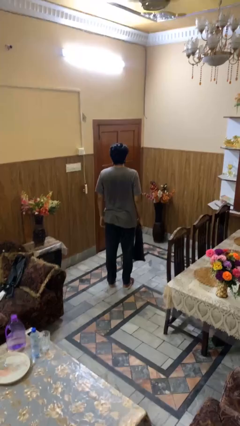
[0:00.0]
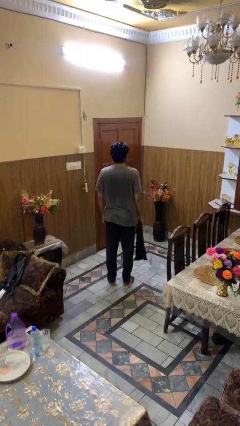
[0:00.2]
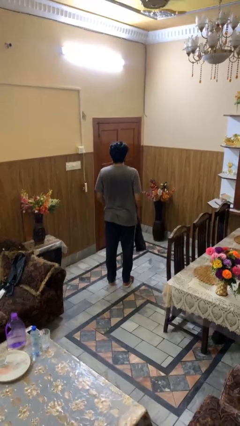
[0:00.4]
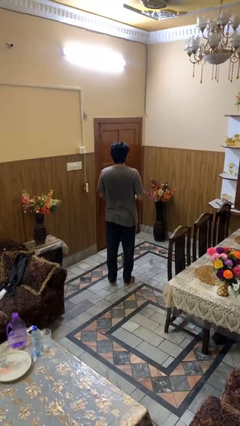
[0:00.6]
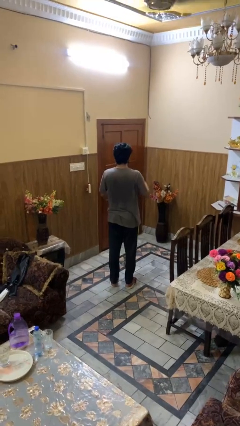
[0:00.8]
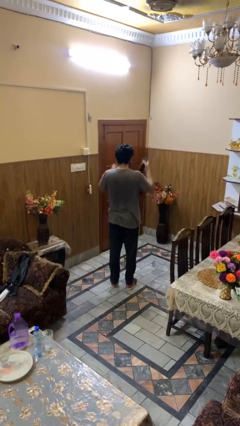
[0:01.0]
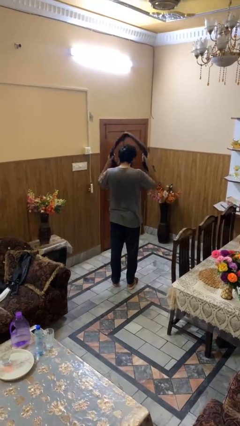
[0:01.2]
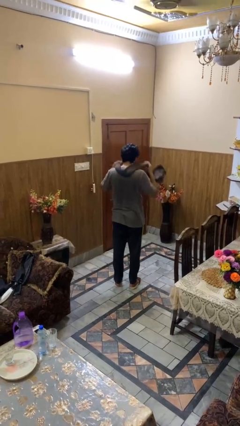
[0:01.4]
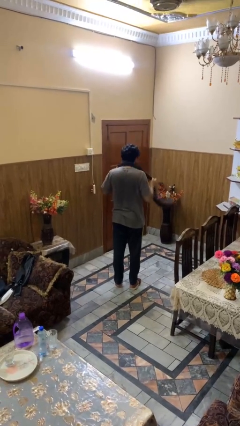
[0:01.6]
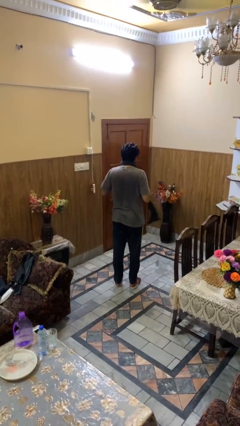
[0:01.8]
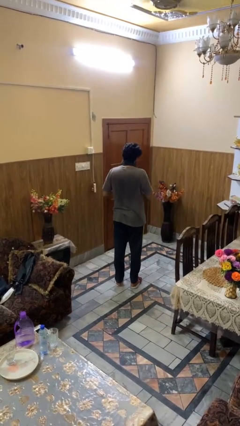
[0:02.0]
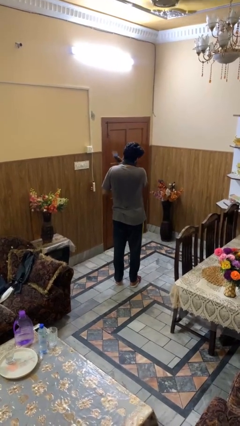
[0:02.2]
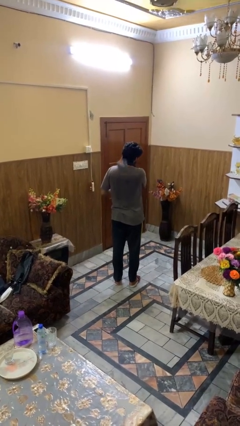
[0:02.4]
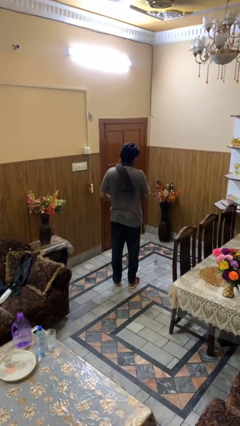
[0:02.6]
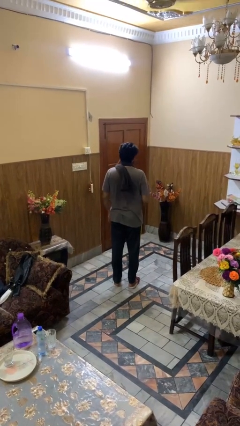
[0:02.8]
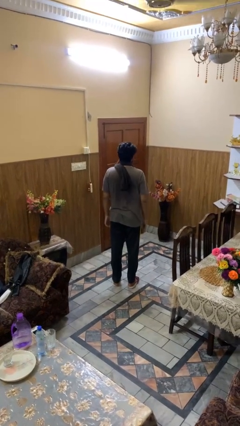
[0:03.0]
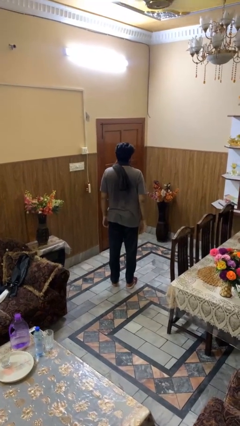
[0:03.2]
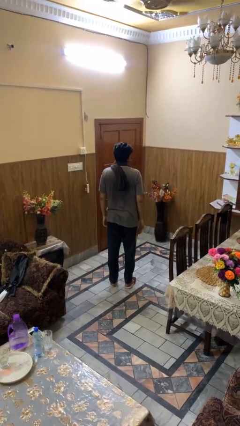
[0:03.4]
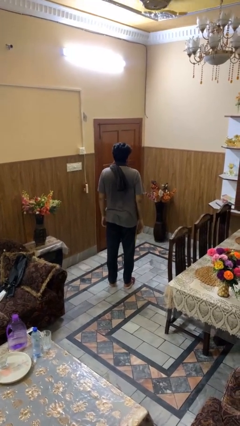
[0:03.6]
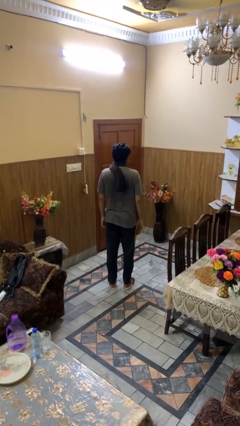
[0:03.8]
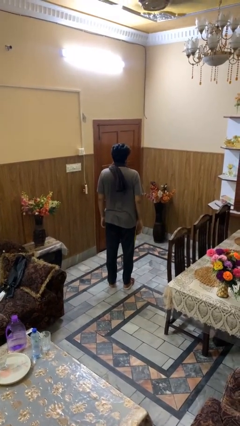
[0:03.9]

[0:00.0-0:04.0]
person puts on scarf

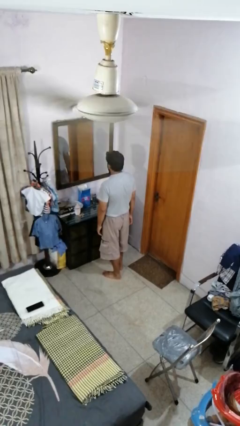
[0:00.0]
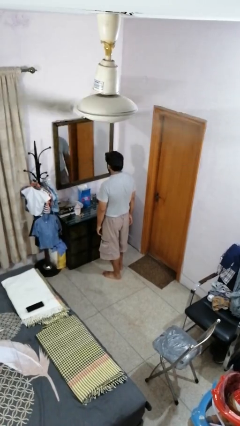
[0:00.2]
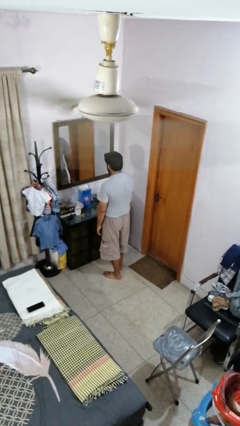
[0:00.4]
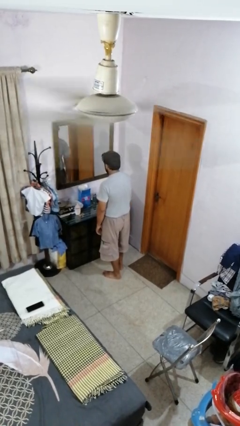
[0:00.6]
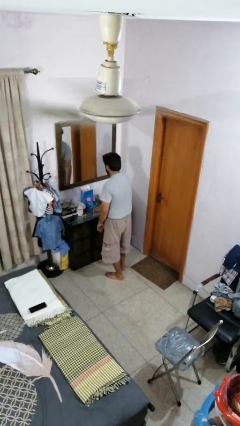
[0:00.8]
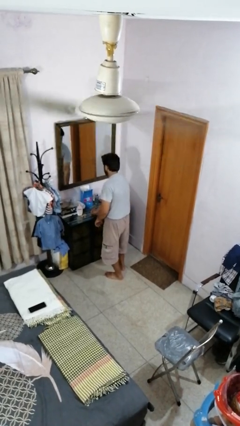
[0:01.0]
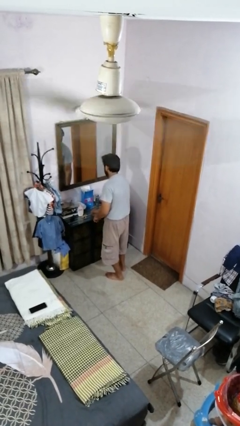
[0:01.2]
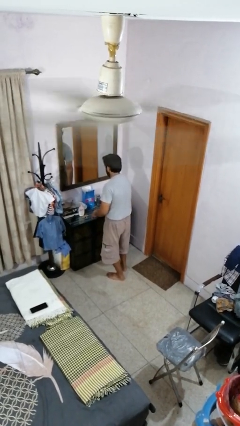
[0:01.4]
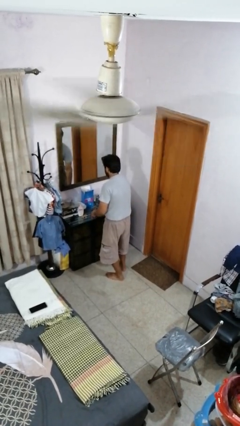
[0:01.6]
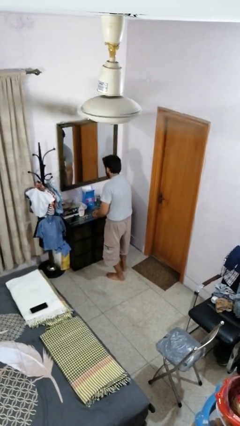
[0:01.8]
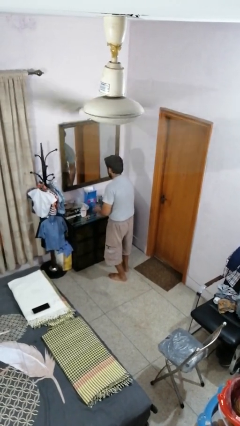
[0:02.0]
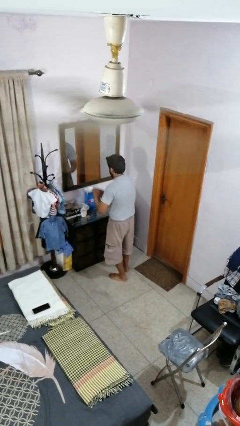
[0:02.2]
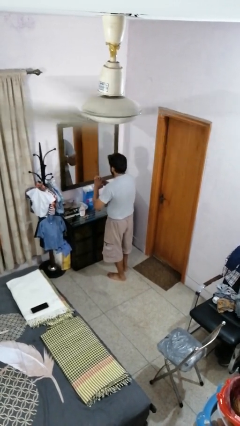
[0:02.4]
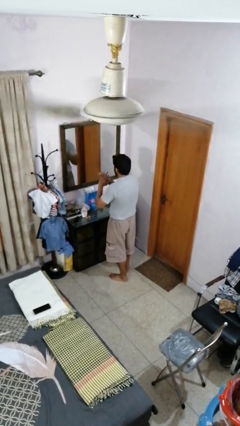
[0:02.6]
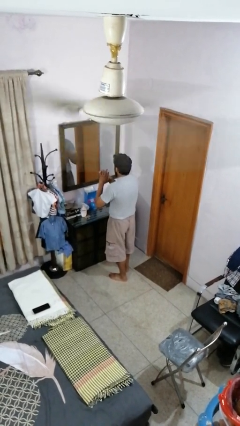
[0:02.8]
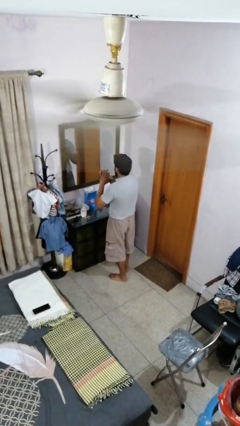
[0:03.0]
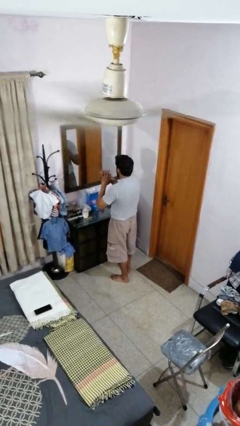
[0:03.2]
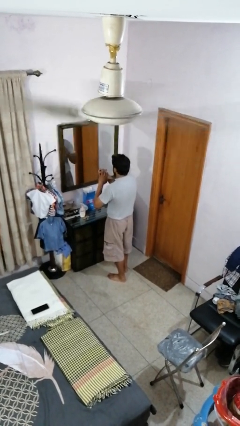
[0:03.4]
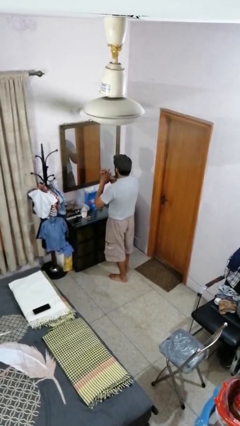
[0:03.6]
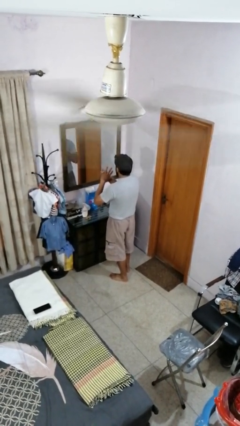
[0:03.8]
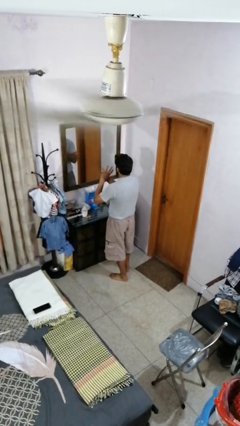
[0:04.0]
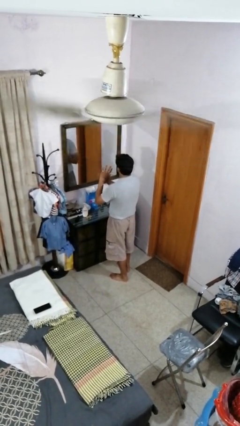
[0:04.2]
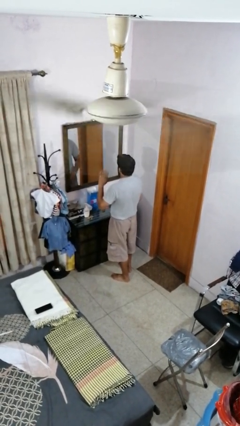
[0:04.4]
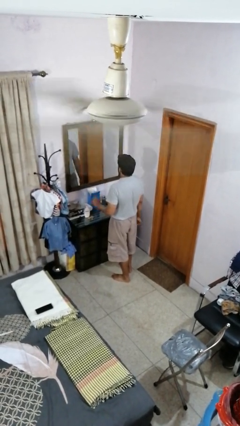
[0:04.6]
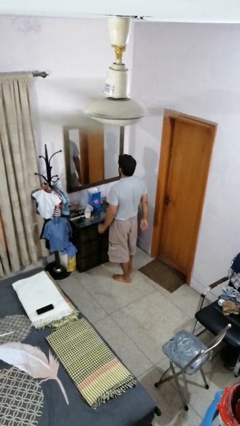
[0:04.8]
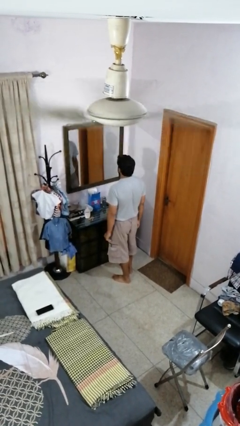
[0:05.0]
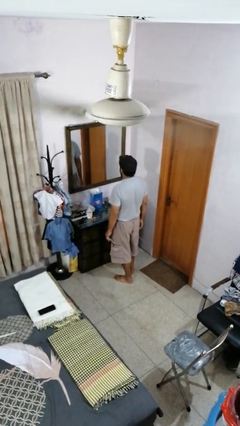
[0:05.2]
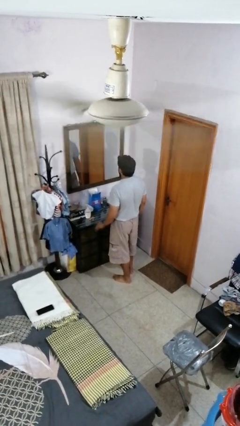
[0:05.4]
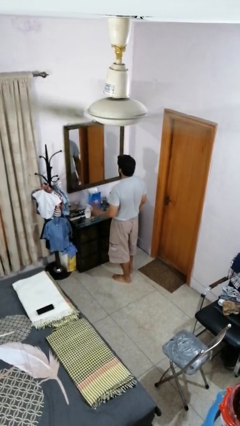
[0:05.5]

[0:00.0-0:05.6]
person puts on ring

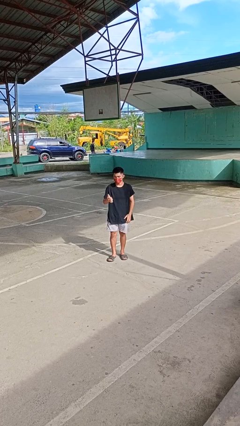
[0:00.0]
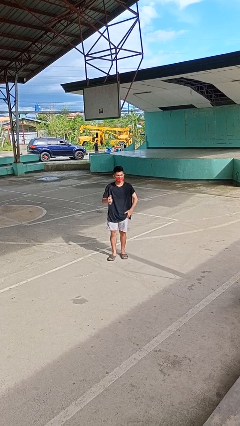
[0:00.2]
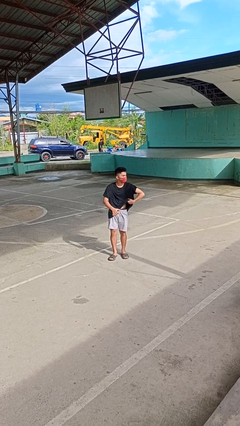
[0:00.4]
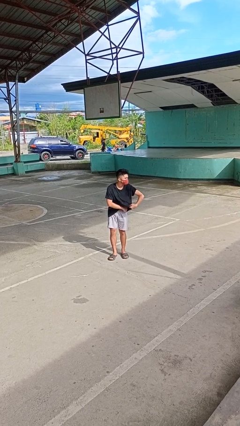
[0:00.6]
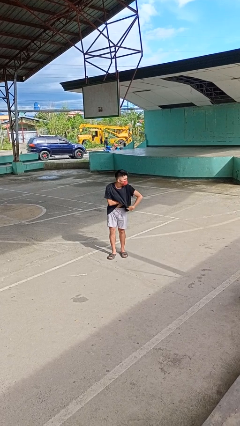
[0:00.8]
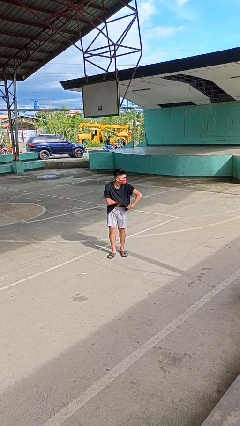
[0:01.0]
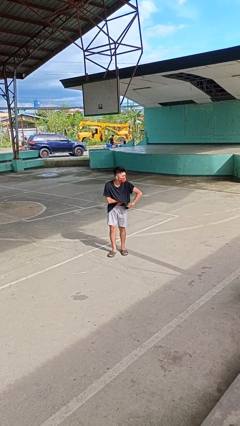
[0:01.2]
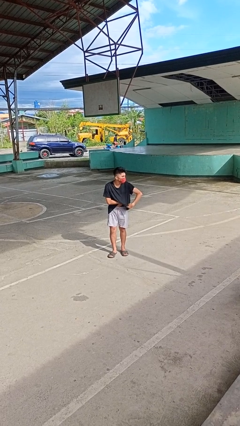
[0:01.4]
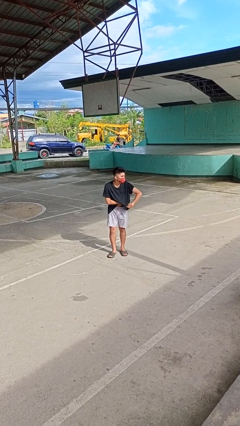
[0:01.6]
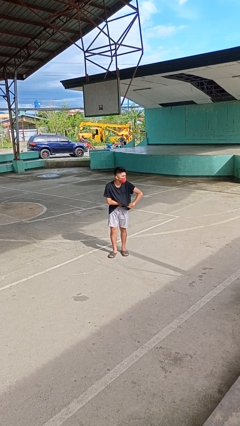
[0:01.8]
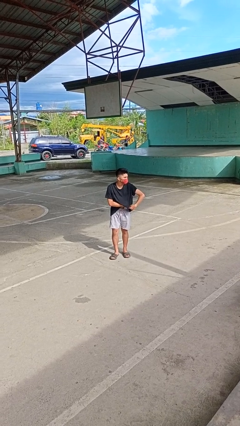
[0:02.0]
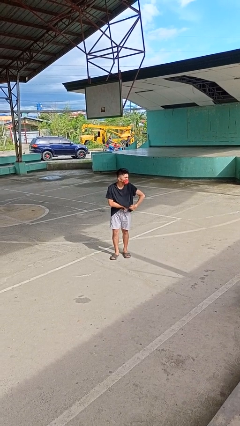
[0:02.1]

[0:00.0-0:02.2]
person applies deodorant

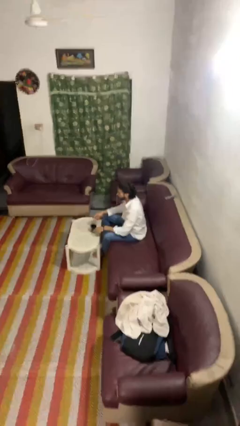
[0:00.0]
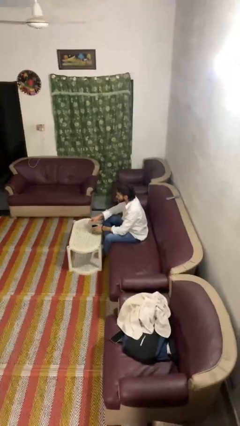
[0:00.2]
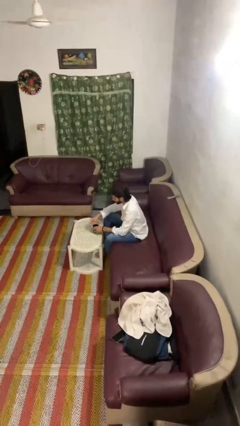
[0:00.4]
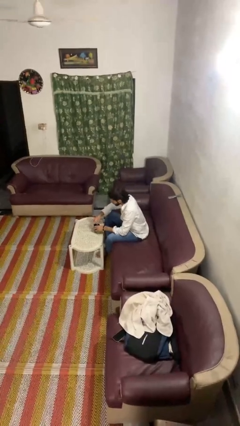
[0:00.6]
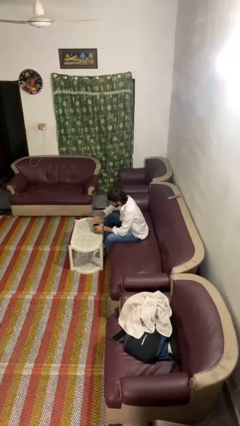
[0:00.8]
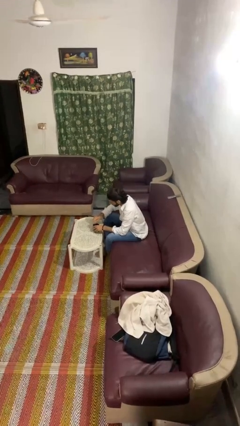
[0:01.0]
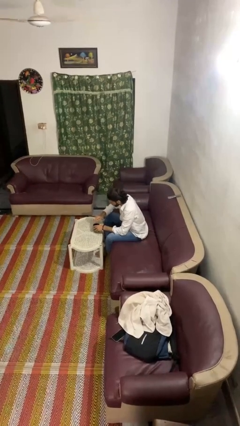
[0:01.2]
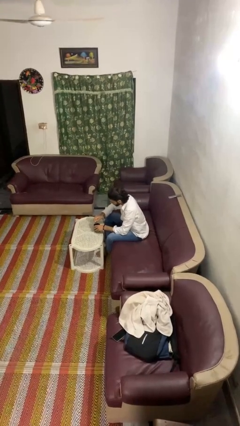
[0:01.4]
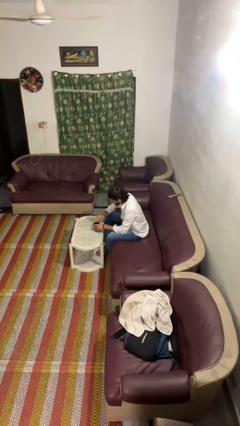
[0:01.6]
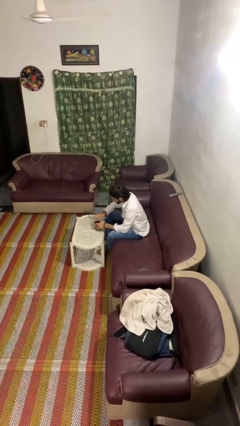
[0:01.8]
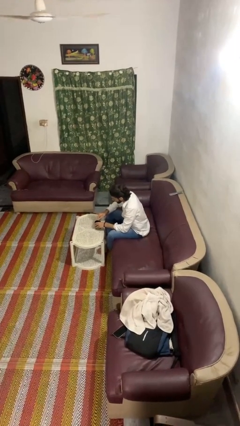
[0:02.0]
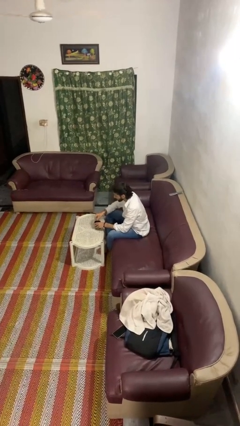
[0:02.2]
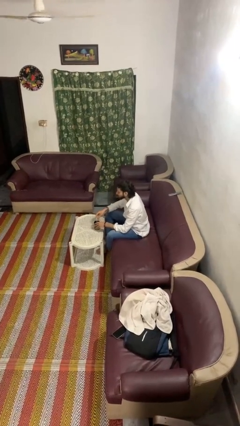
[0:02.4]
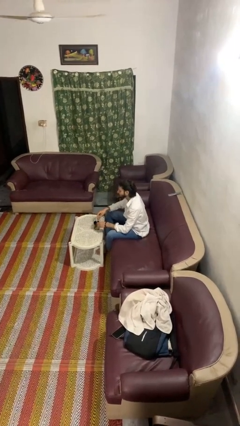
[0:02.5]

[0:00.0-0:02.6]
person stirs mug

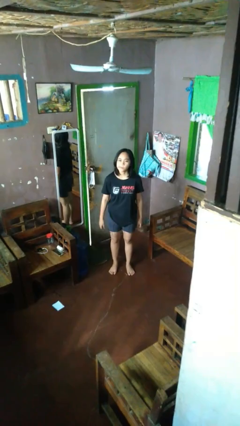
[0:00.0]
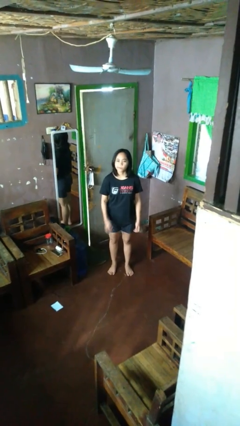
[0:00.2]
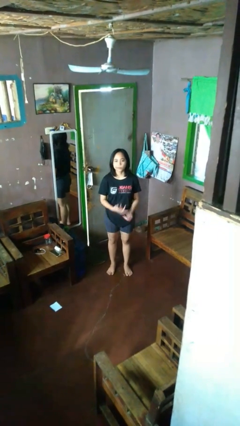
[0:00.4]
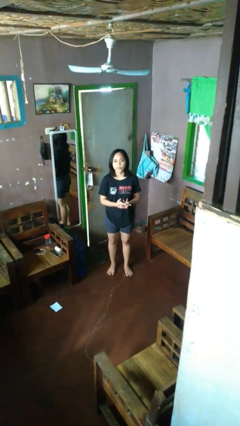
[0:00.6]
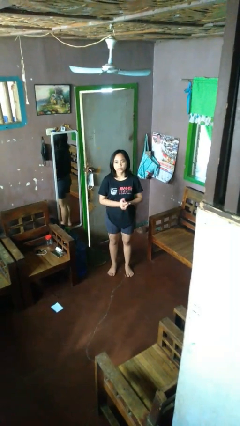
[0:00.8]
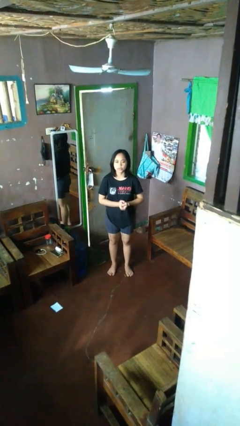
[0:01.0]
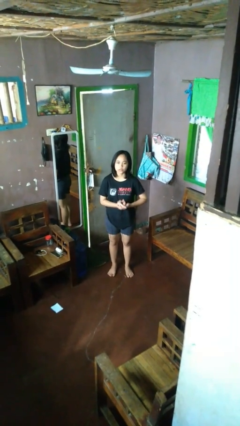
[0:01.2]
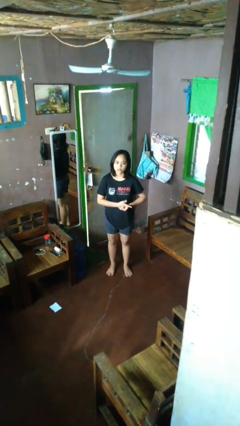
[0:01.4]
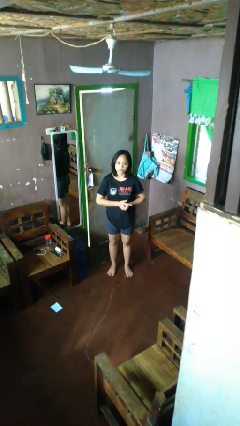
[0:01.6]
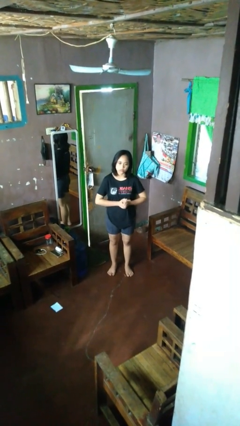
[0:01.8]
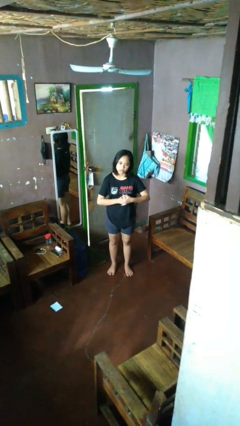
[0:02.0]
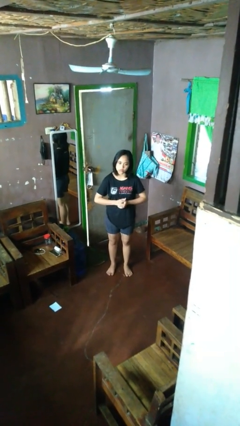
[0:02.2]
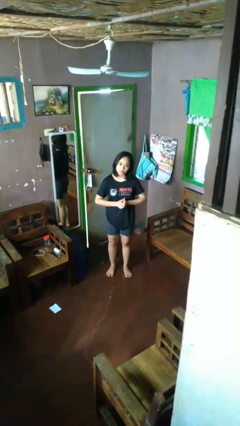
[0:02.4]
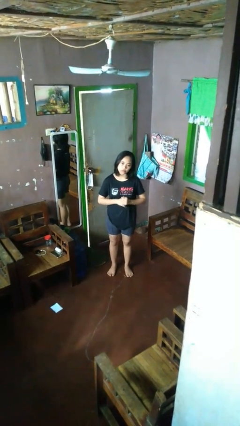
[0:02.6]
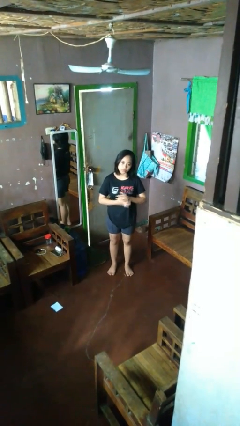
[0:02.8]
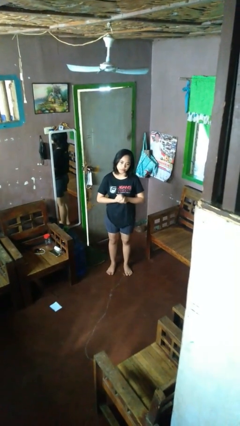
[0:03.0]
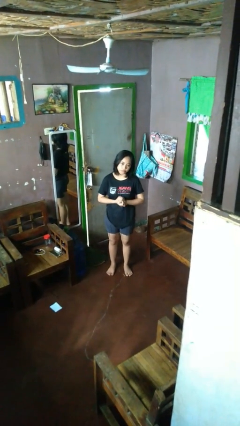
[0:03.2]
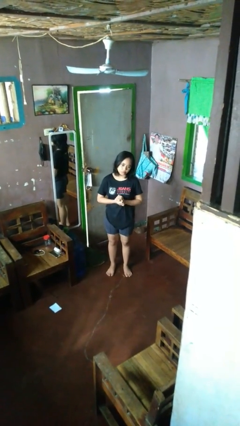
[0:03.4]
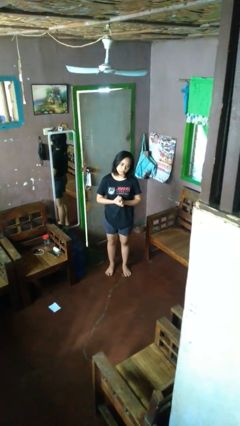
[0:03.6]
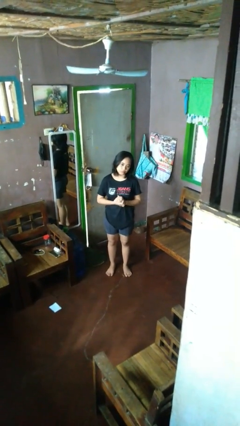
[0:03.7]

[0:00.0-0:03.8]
person cracks knuckles
